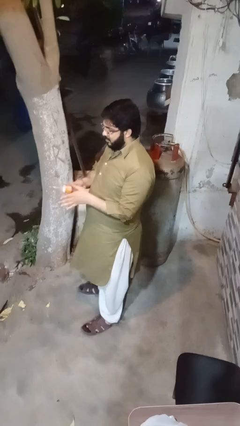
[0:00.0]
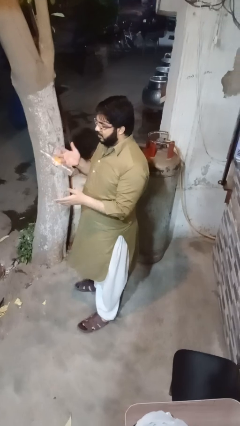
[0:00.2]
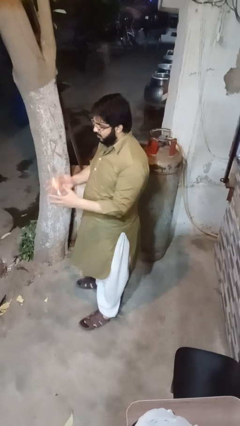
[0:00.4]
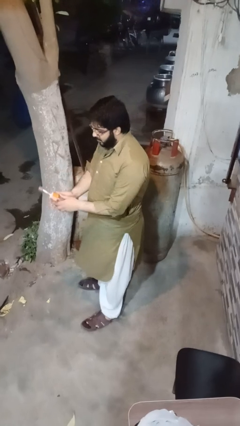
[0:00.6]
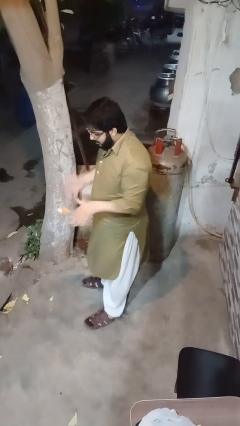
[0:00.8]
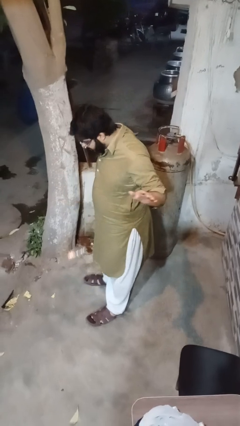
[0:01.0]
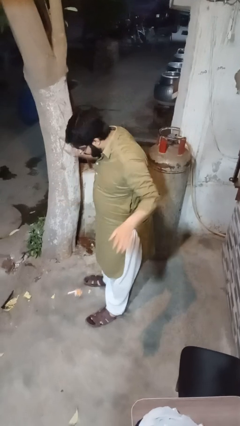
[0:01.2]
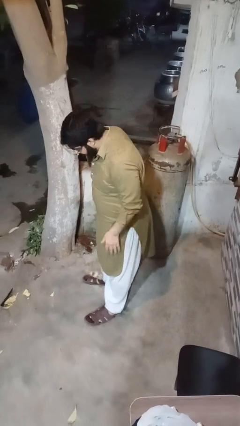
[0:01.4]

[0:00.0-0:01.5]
person drops object

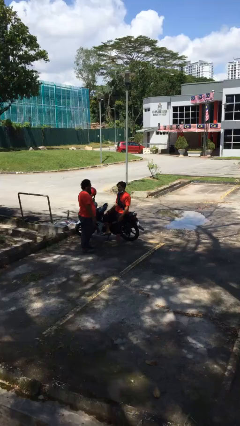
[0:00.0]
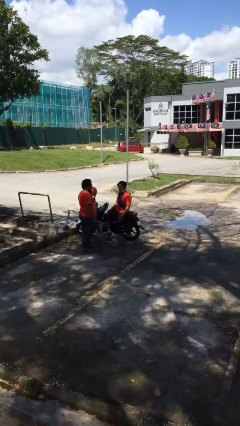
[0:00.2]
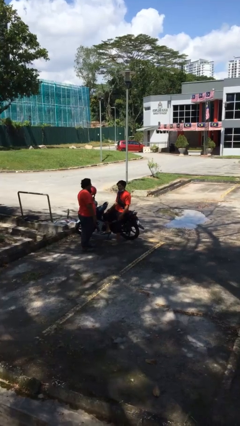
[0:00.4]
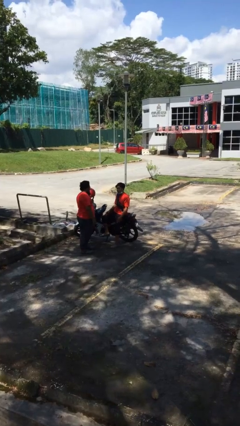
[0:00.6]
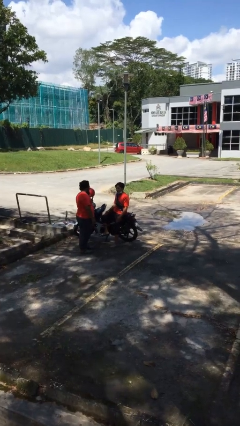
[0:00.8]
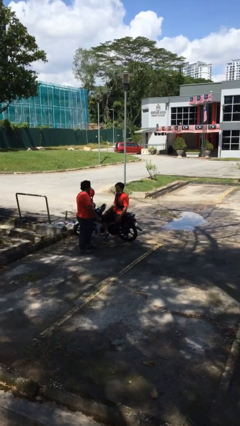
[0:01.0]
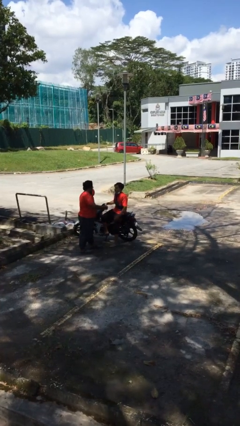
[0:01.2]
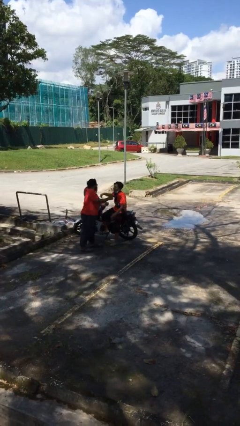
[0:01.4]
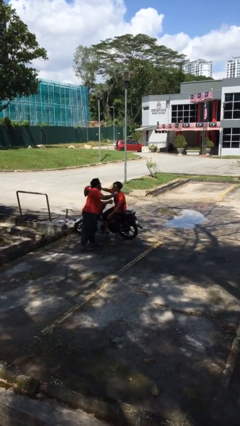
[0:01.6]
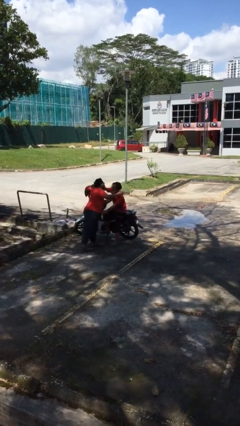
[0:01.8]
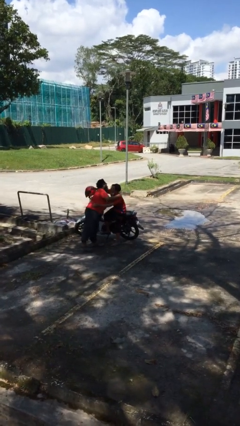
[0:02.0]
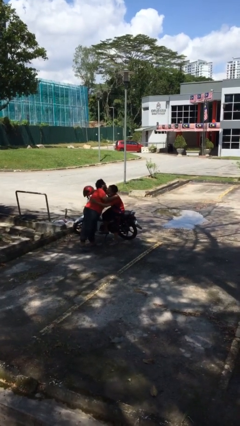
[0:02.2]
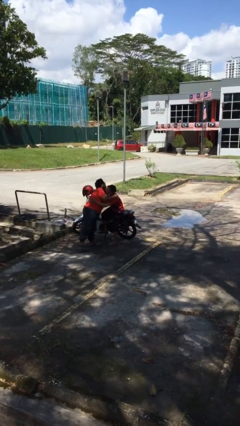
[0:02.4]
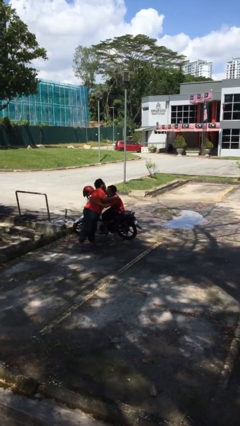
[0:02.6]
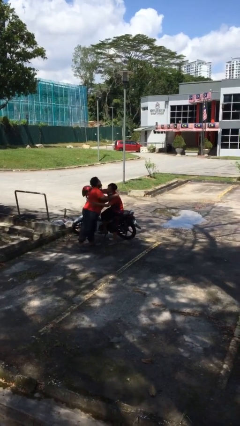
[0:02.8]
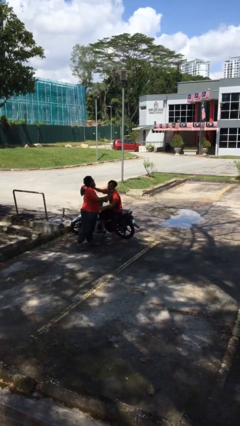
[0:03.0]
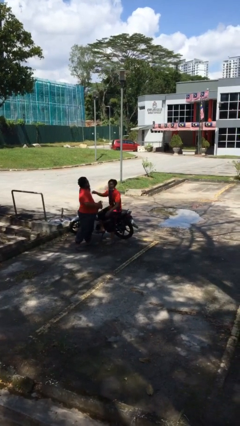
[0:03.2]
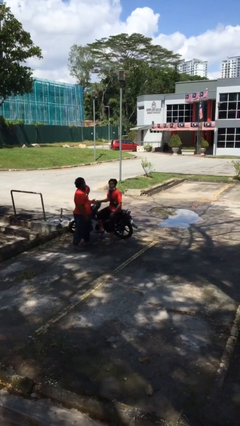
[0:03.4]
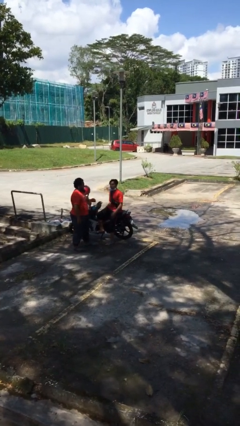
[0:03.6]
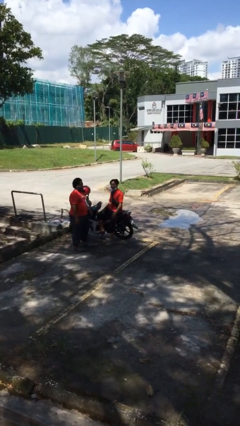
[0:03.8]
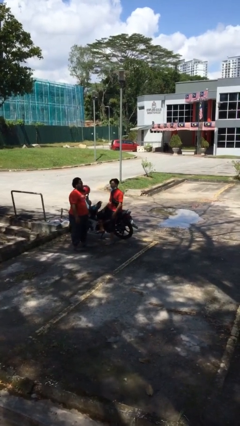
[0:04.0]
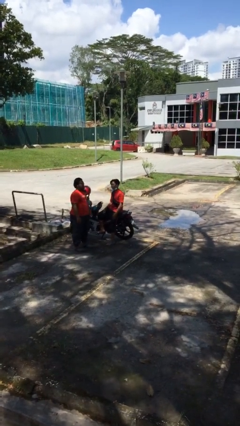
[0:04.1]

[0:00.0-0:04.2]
person embraces person

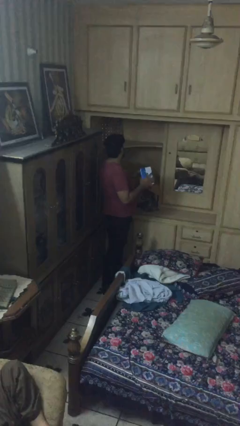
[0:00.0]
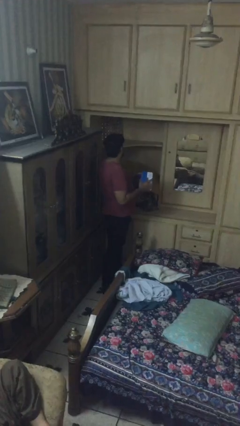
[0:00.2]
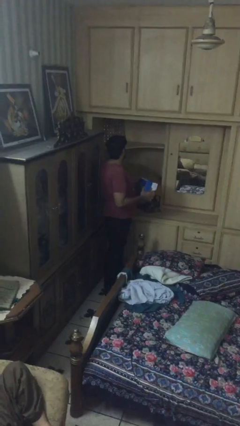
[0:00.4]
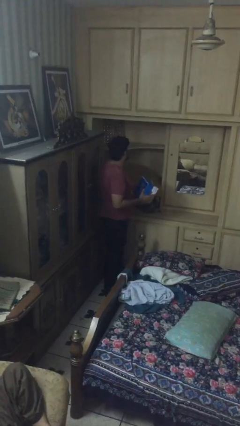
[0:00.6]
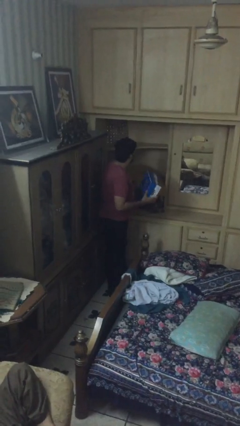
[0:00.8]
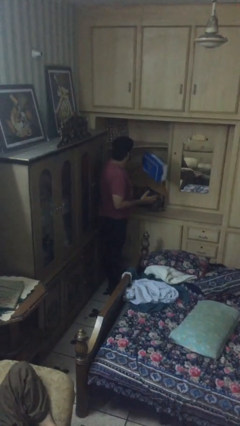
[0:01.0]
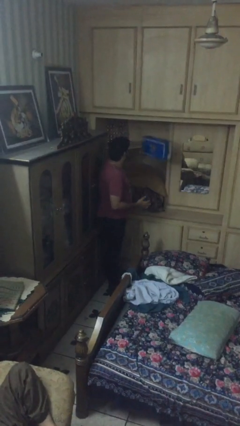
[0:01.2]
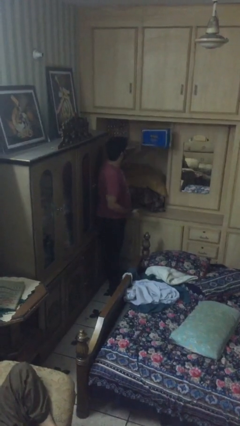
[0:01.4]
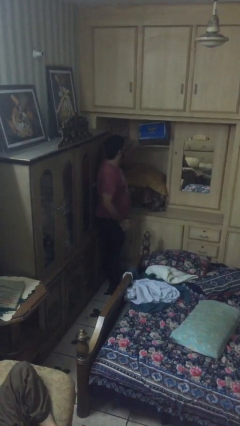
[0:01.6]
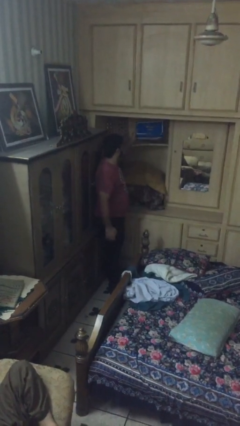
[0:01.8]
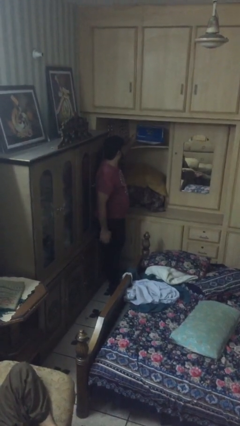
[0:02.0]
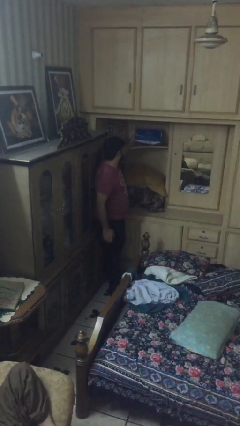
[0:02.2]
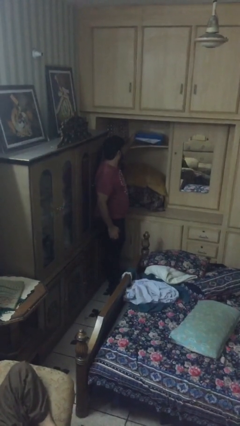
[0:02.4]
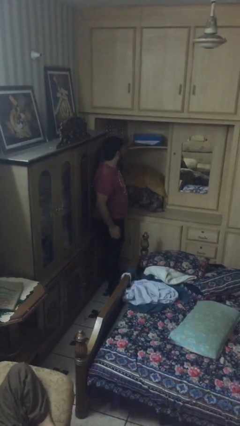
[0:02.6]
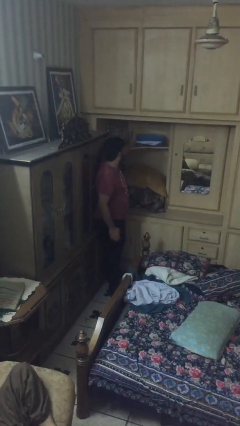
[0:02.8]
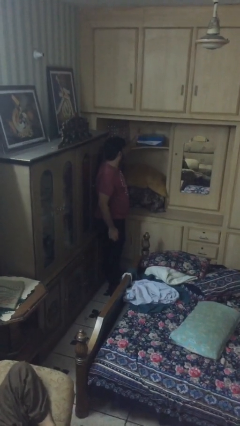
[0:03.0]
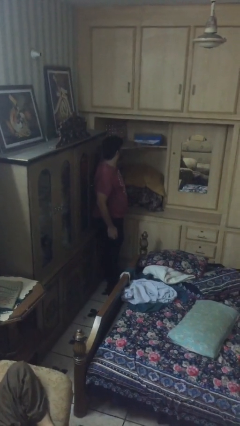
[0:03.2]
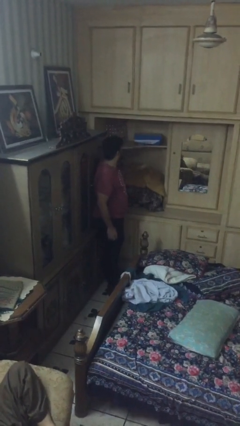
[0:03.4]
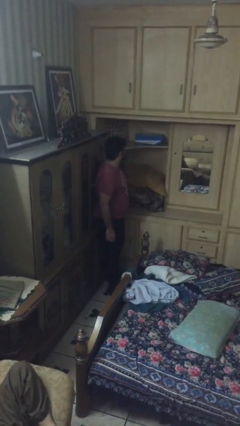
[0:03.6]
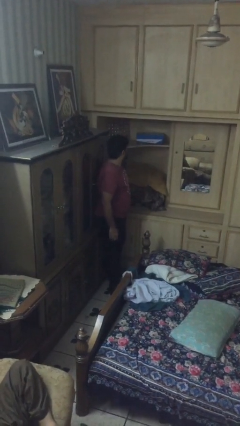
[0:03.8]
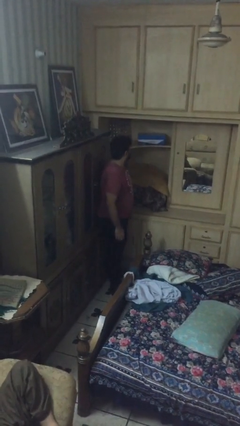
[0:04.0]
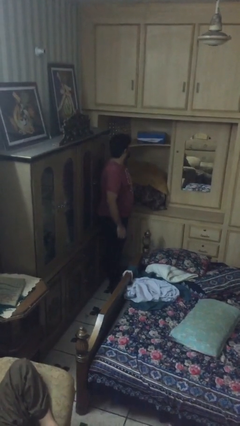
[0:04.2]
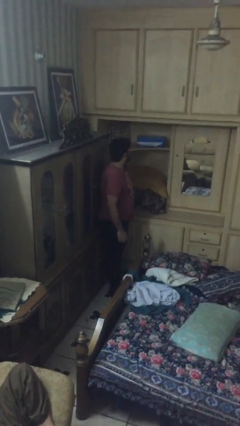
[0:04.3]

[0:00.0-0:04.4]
person puts down object on shelf

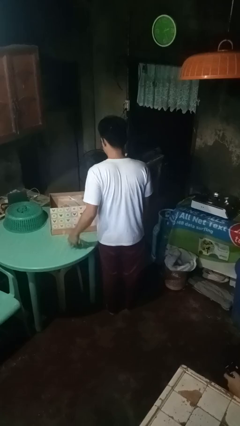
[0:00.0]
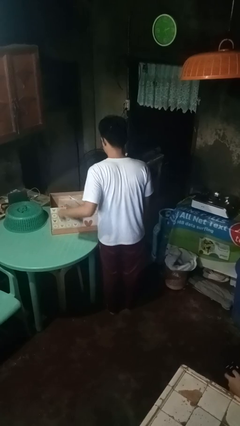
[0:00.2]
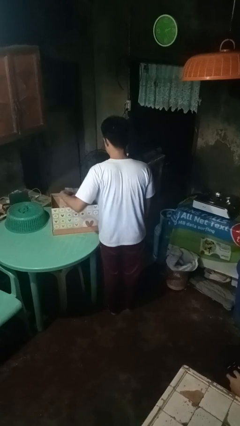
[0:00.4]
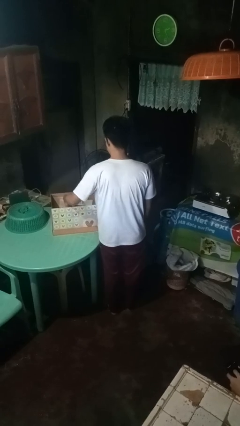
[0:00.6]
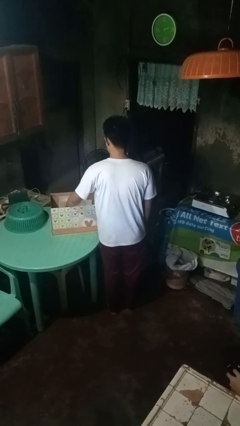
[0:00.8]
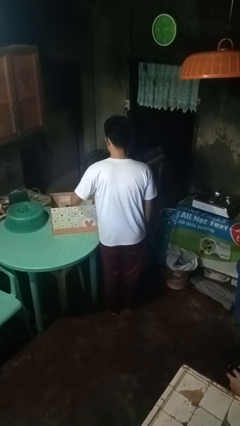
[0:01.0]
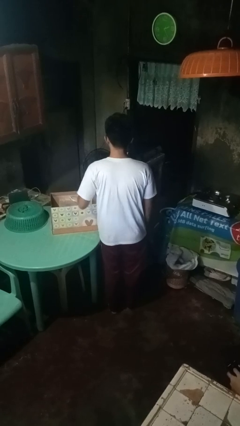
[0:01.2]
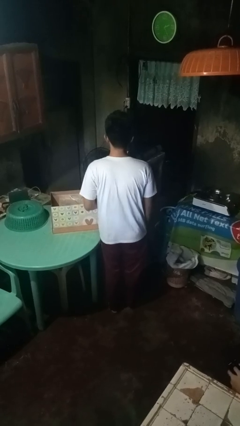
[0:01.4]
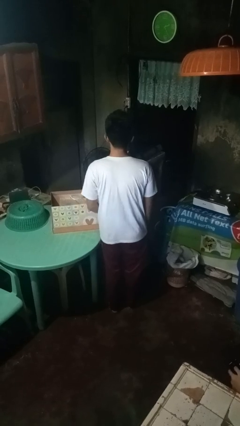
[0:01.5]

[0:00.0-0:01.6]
person puts object into box

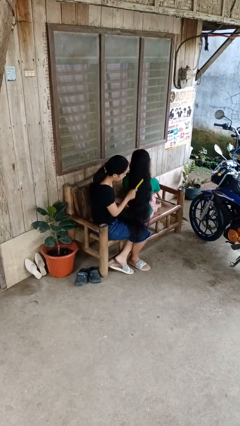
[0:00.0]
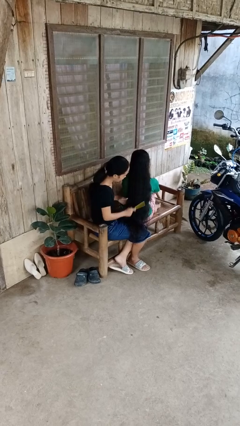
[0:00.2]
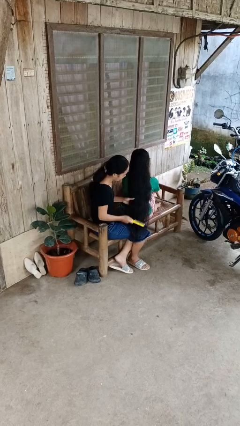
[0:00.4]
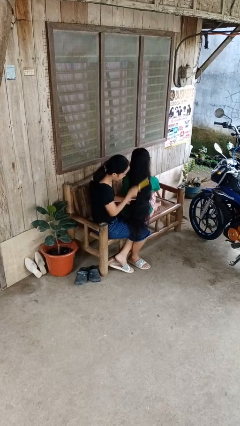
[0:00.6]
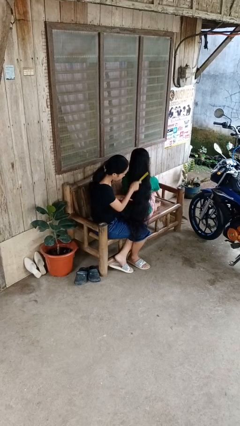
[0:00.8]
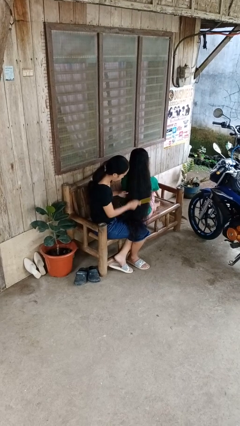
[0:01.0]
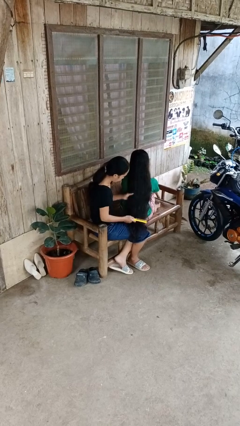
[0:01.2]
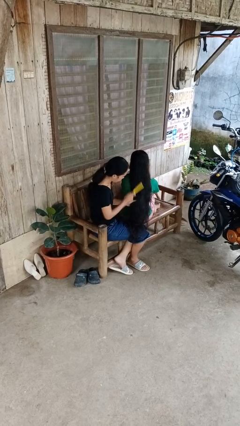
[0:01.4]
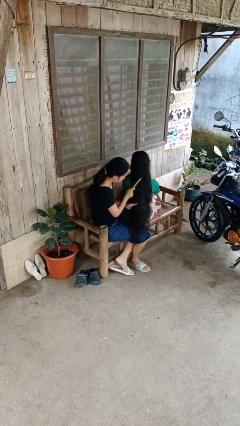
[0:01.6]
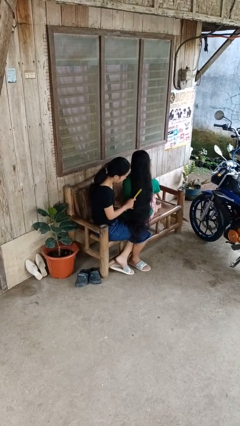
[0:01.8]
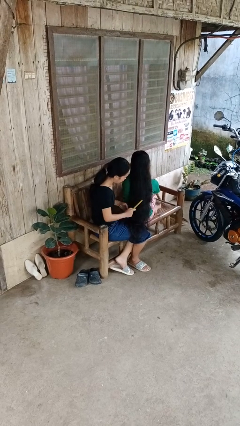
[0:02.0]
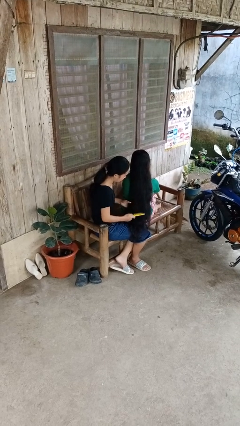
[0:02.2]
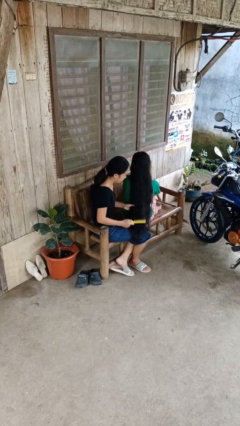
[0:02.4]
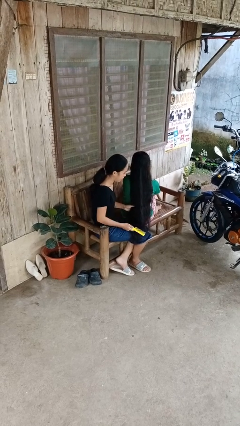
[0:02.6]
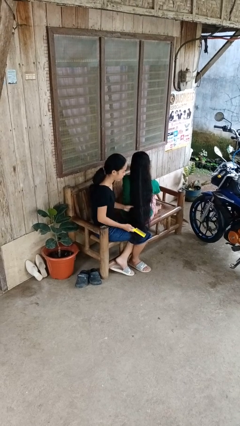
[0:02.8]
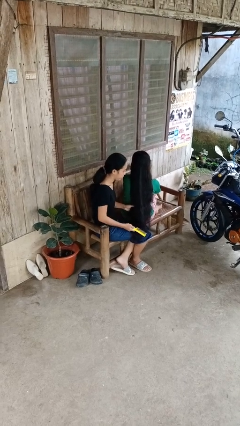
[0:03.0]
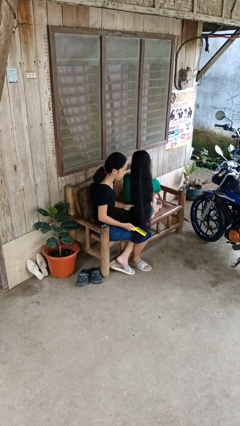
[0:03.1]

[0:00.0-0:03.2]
person brushes hair of person

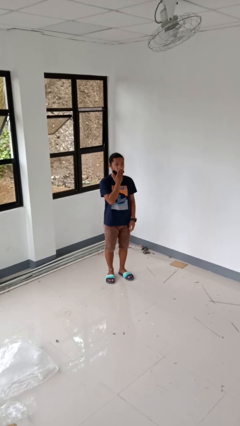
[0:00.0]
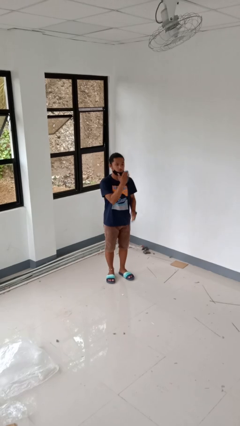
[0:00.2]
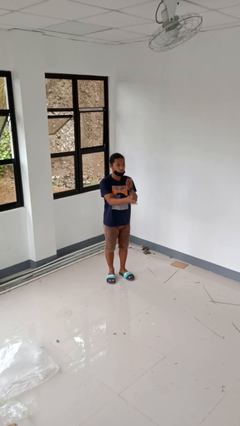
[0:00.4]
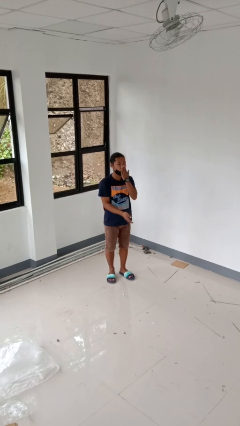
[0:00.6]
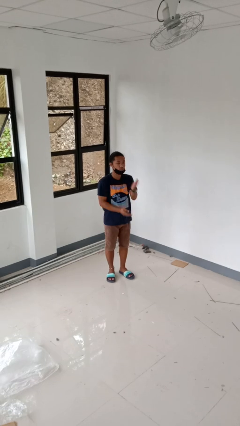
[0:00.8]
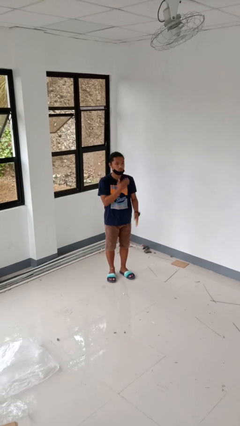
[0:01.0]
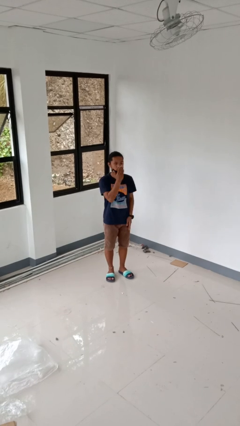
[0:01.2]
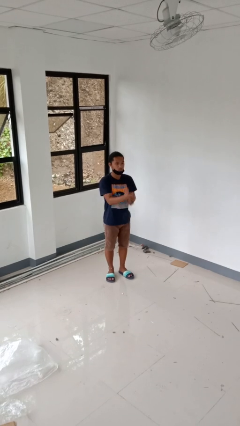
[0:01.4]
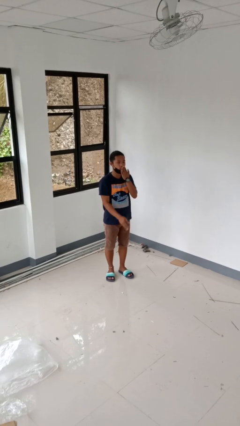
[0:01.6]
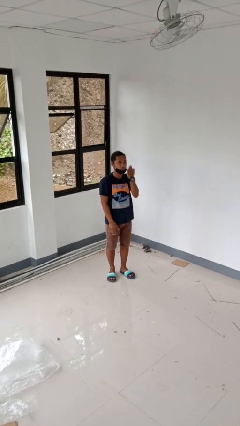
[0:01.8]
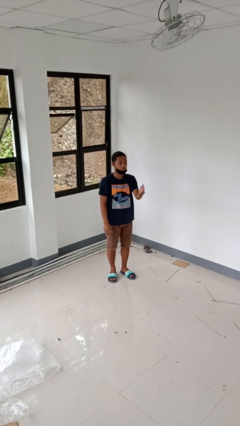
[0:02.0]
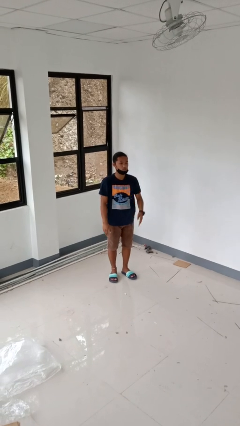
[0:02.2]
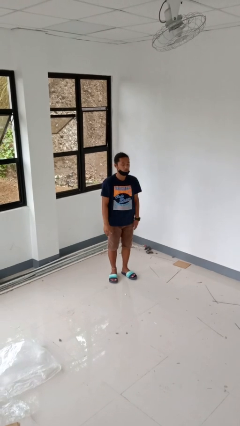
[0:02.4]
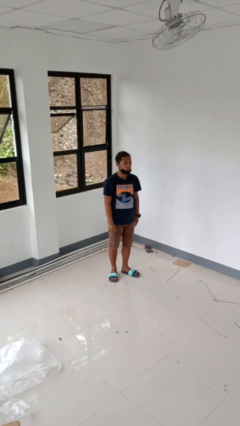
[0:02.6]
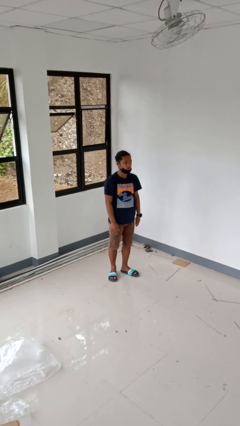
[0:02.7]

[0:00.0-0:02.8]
person gestures blow kiss
